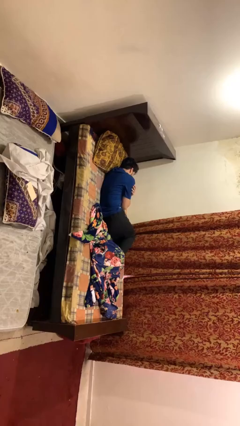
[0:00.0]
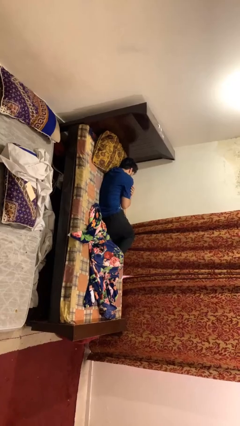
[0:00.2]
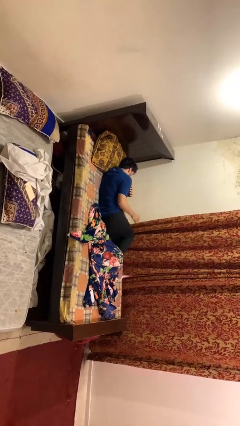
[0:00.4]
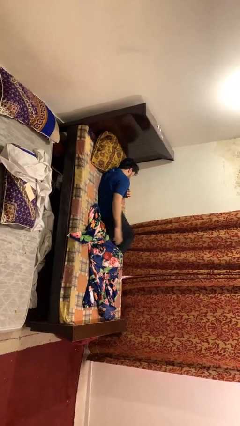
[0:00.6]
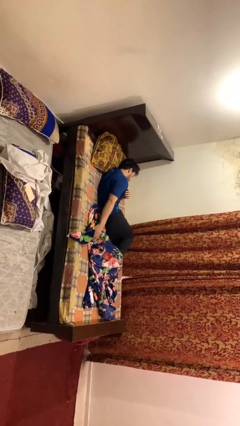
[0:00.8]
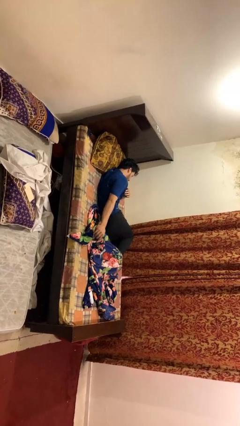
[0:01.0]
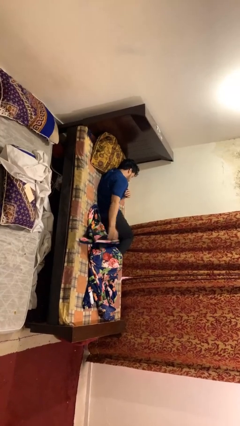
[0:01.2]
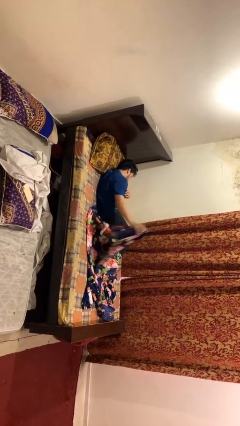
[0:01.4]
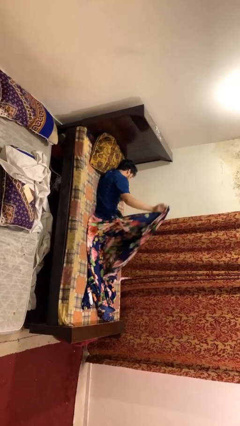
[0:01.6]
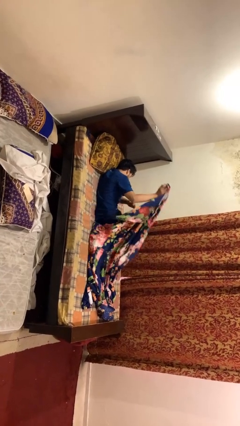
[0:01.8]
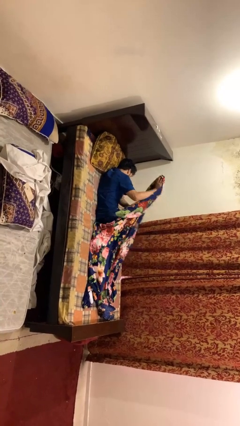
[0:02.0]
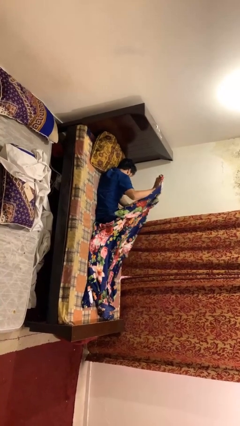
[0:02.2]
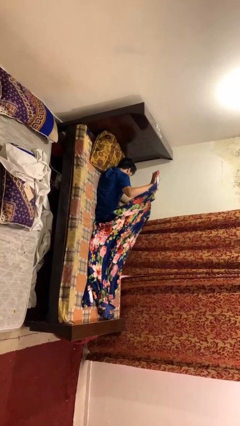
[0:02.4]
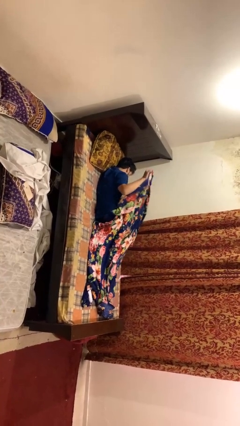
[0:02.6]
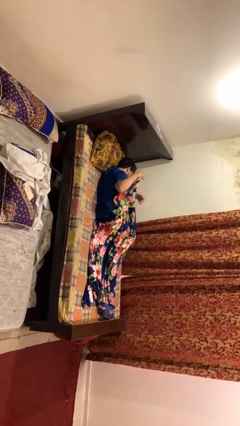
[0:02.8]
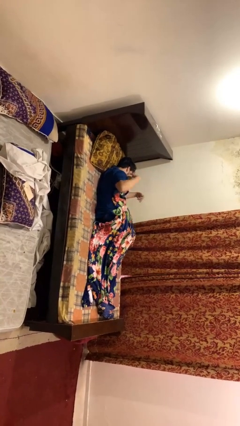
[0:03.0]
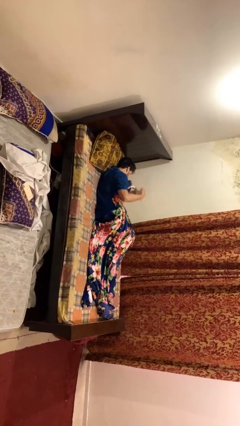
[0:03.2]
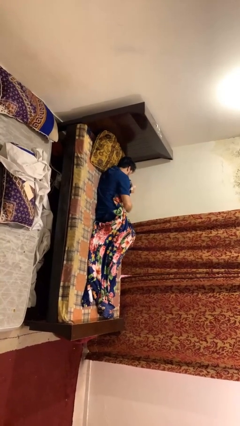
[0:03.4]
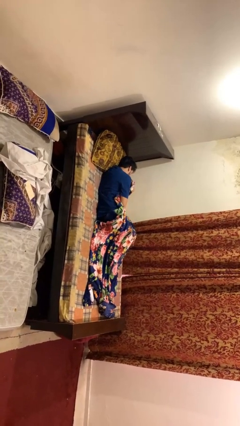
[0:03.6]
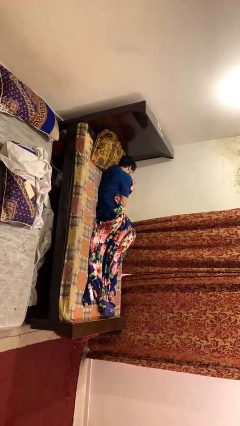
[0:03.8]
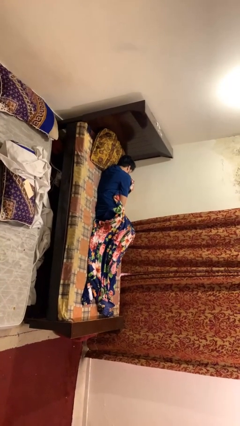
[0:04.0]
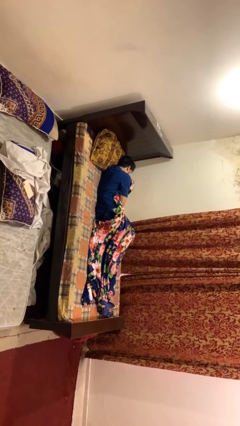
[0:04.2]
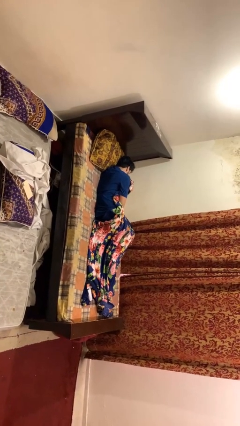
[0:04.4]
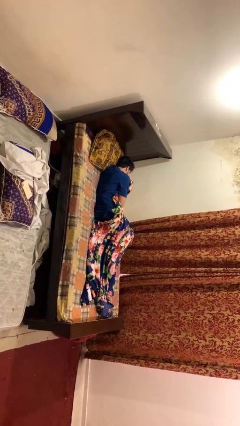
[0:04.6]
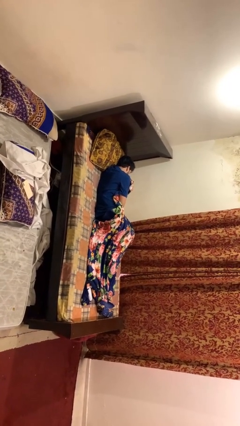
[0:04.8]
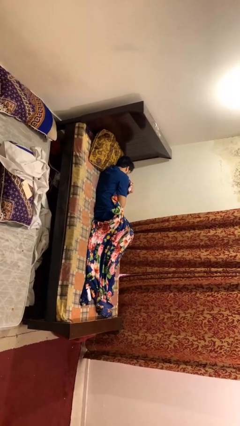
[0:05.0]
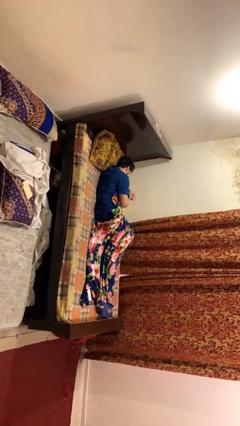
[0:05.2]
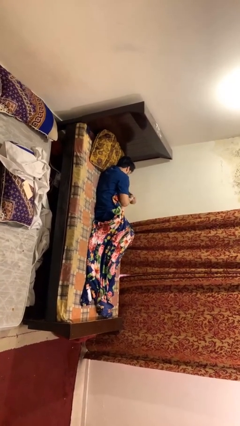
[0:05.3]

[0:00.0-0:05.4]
person covers with blanket

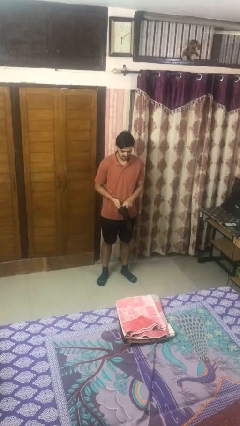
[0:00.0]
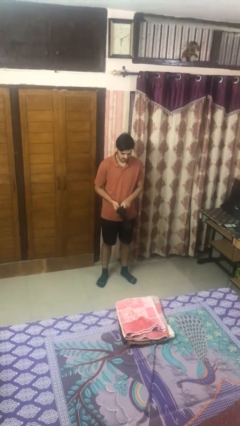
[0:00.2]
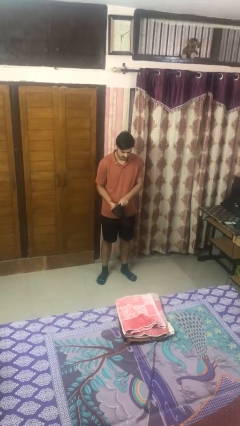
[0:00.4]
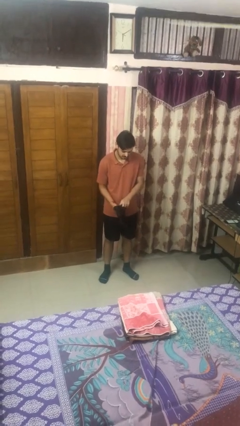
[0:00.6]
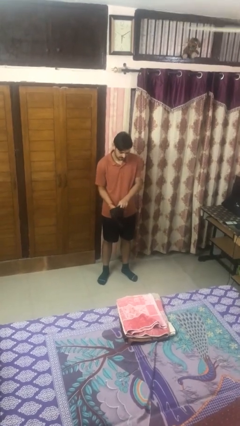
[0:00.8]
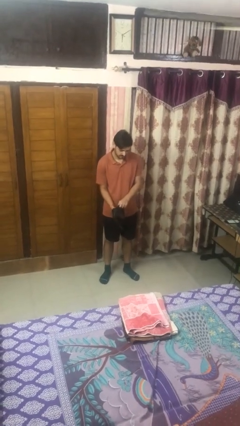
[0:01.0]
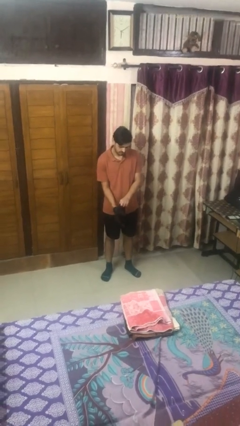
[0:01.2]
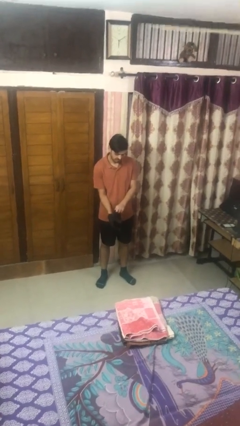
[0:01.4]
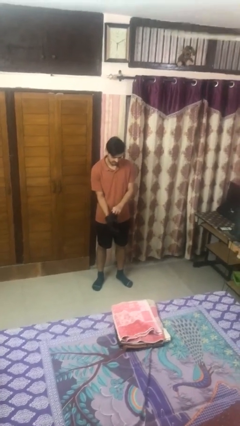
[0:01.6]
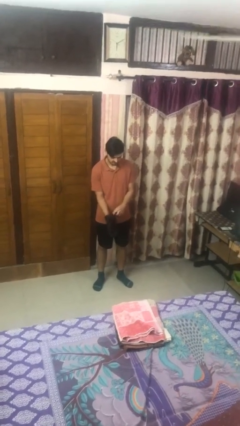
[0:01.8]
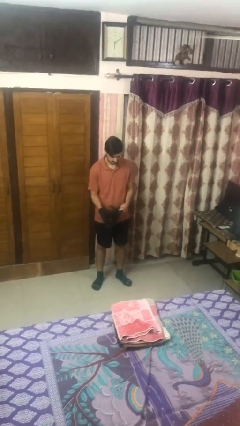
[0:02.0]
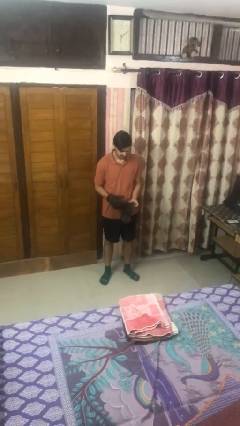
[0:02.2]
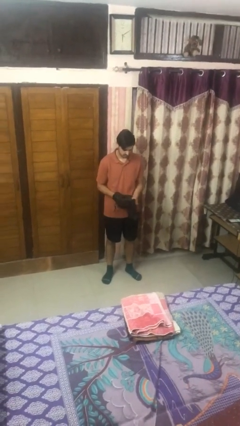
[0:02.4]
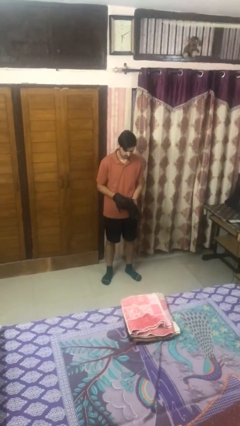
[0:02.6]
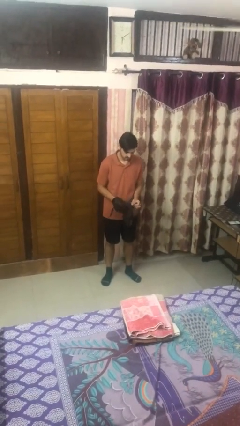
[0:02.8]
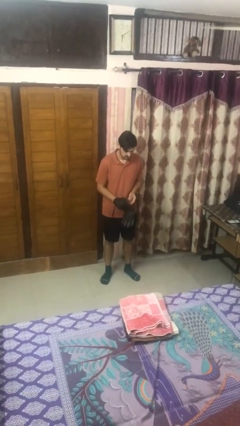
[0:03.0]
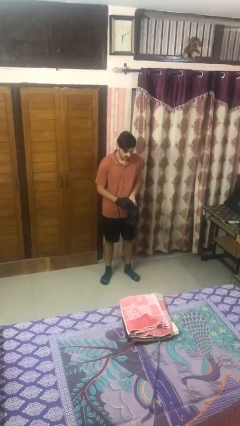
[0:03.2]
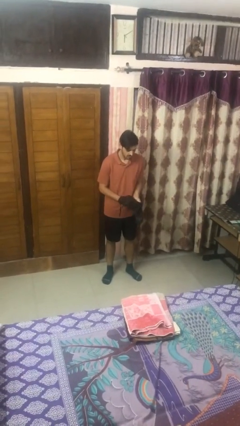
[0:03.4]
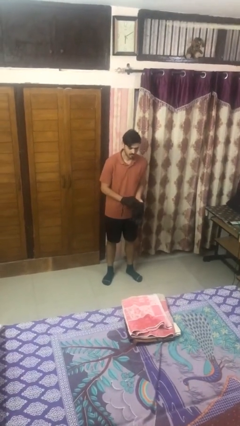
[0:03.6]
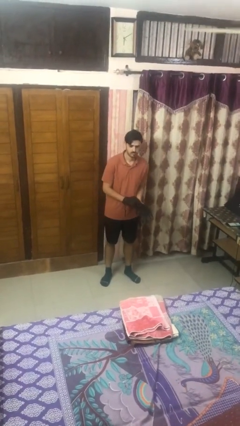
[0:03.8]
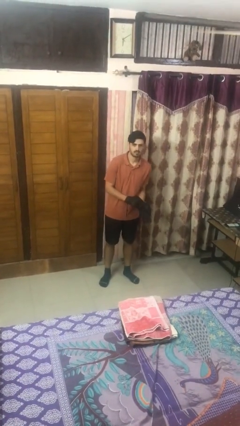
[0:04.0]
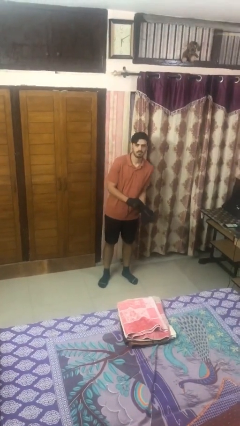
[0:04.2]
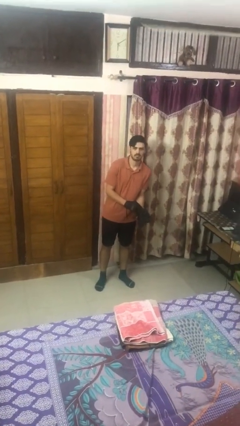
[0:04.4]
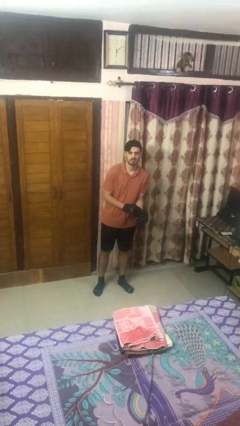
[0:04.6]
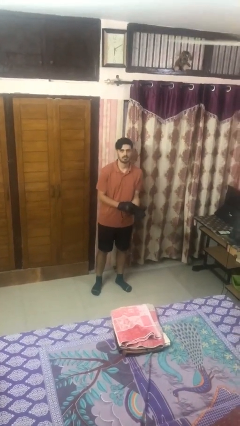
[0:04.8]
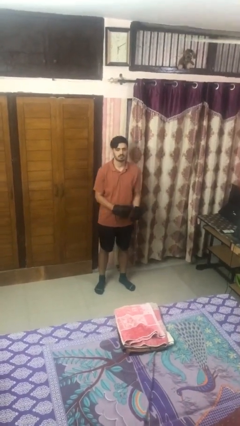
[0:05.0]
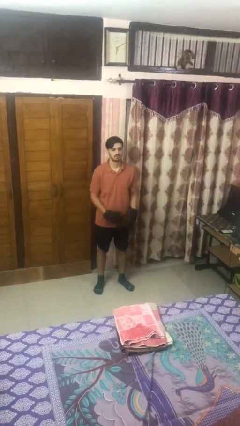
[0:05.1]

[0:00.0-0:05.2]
person puts on gloves

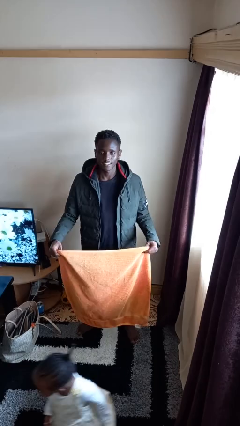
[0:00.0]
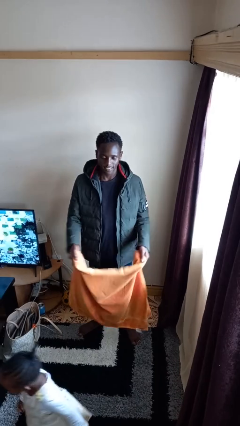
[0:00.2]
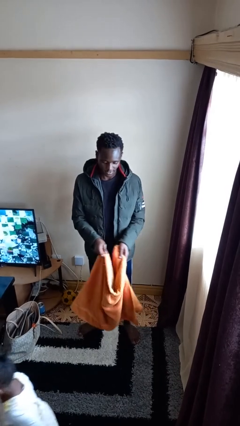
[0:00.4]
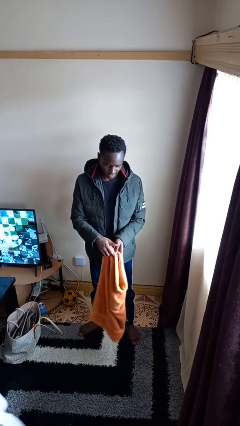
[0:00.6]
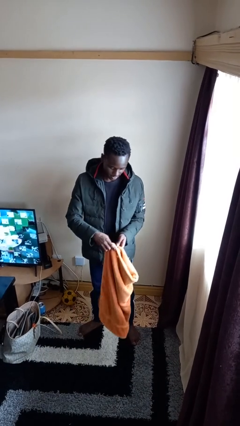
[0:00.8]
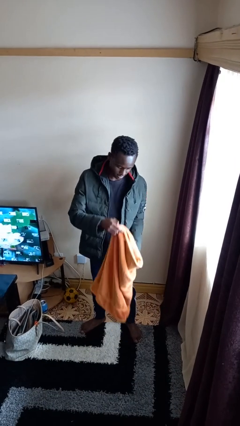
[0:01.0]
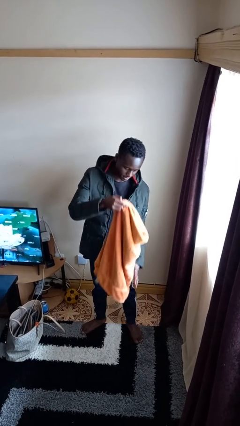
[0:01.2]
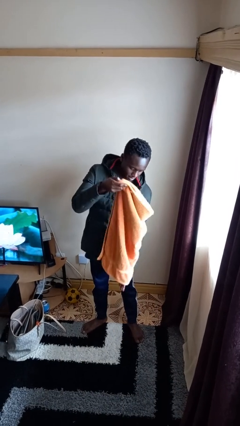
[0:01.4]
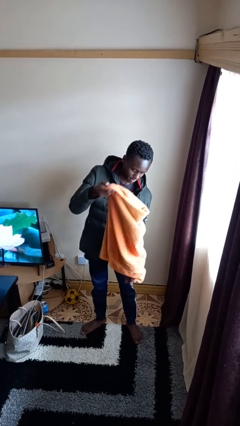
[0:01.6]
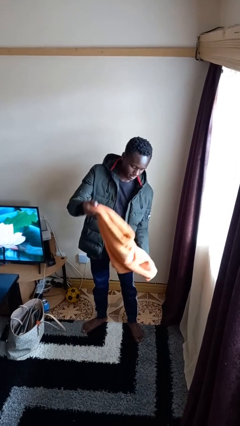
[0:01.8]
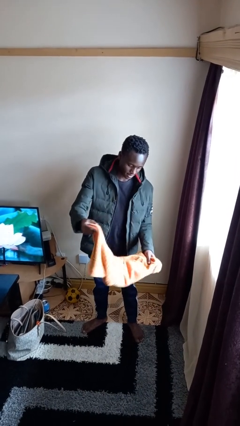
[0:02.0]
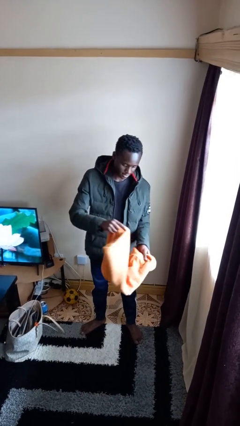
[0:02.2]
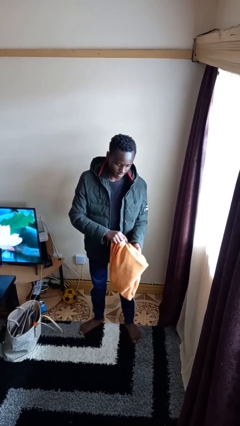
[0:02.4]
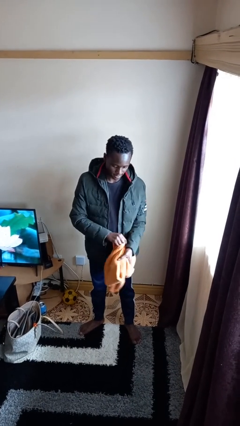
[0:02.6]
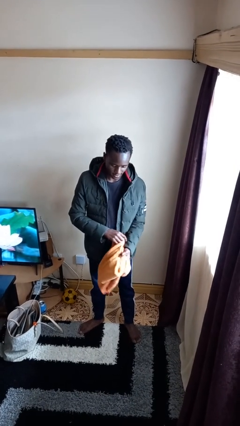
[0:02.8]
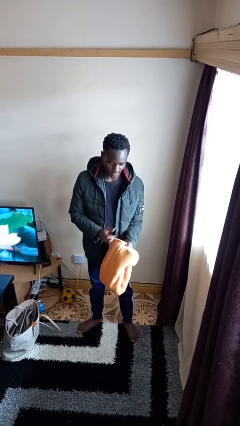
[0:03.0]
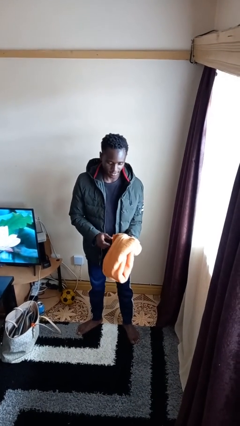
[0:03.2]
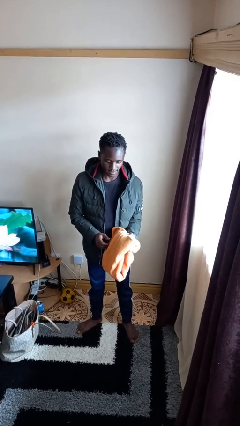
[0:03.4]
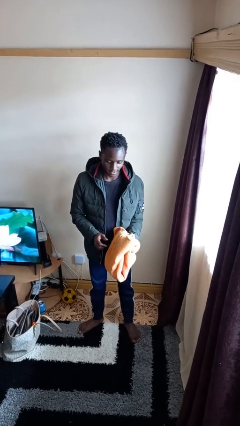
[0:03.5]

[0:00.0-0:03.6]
person folds towel

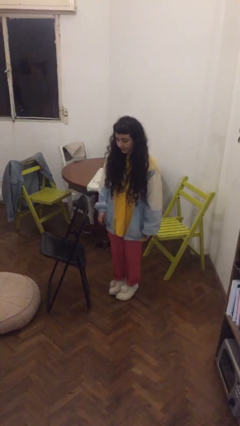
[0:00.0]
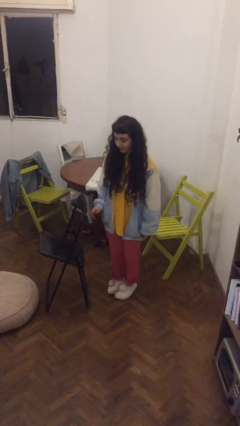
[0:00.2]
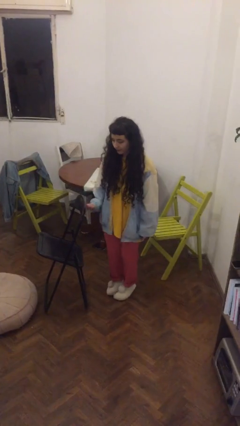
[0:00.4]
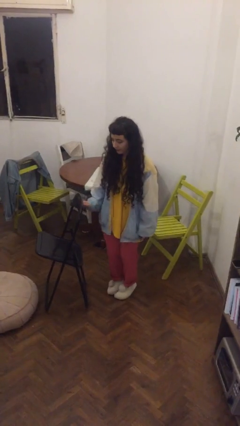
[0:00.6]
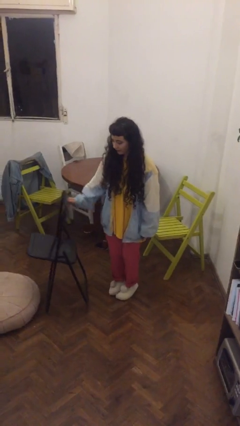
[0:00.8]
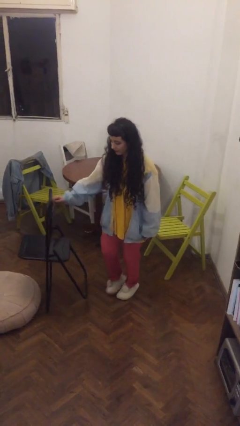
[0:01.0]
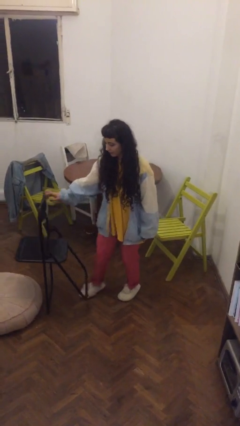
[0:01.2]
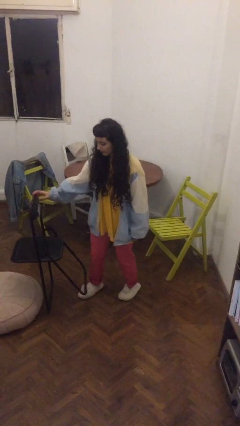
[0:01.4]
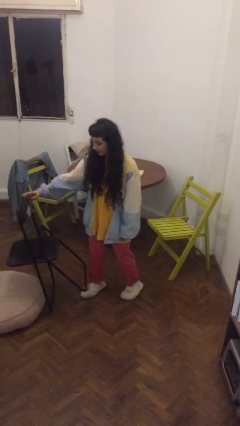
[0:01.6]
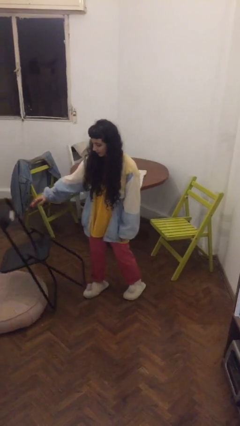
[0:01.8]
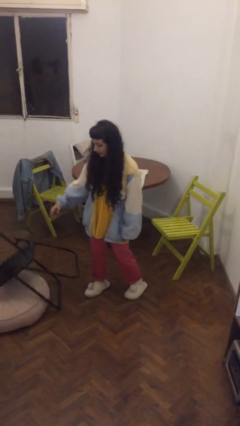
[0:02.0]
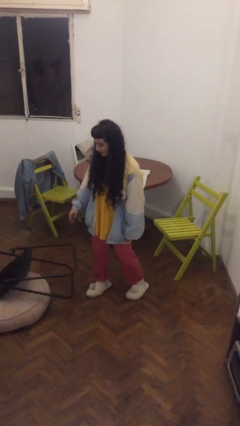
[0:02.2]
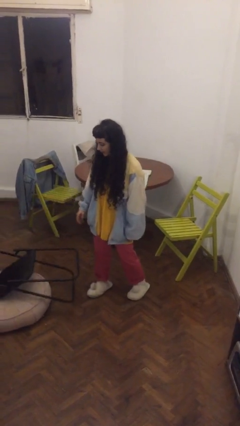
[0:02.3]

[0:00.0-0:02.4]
person knocks over furniture

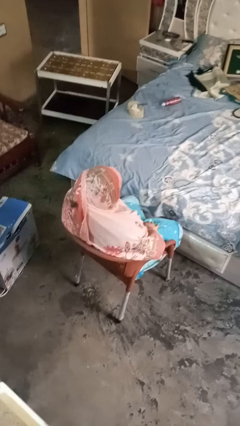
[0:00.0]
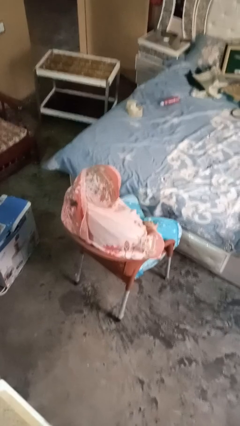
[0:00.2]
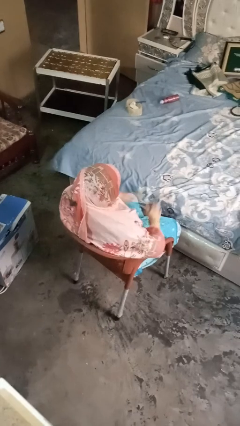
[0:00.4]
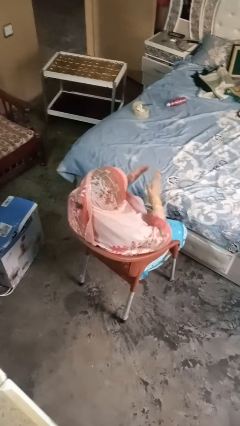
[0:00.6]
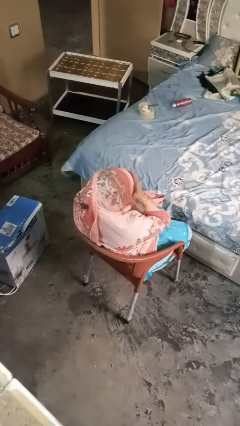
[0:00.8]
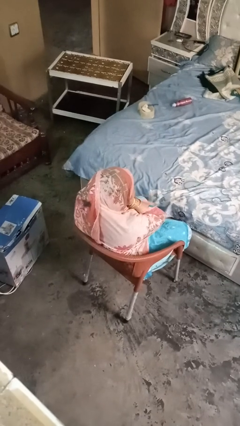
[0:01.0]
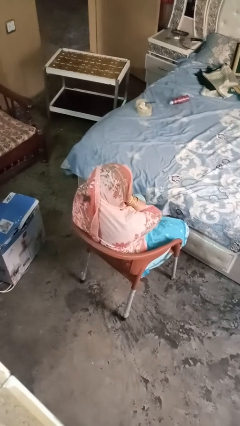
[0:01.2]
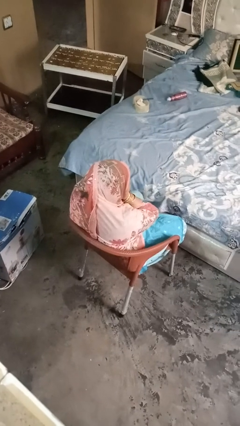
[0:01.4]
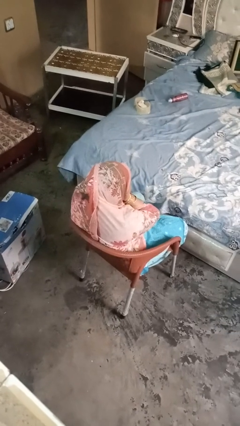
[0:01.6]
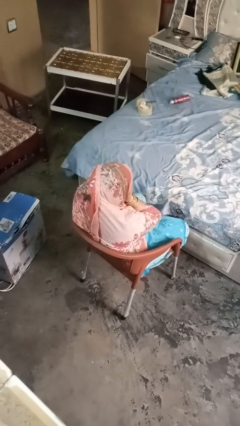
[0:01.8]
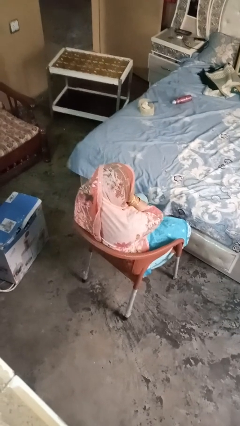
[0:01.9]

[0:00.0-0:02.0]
person covers face with hands
